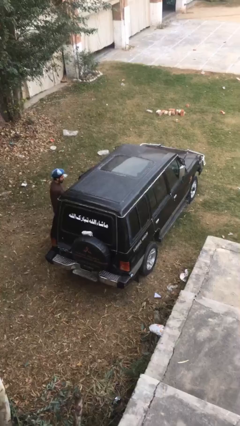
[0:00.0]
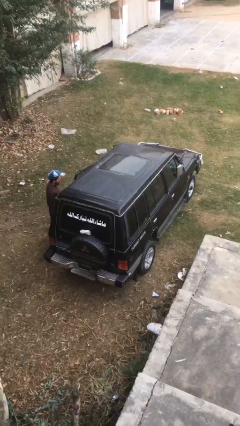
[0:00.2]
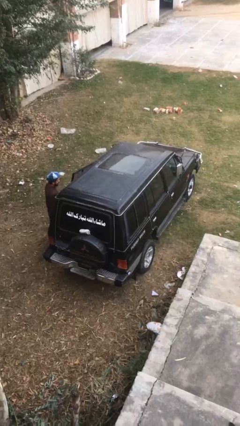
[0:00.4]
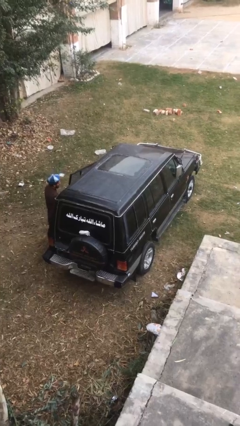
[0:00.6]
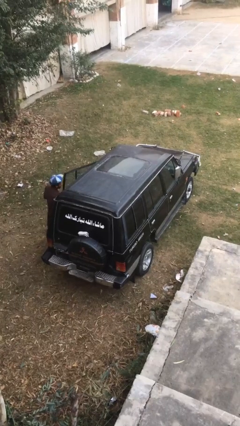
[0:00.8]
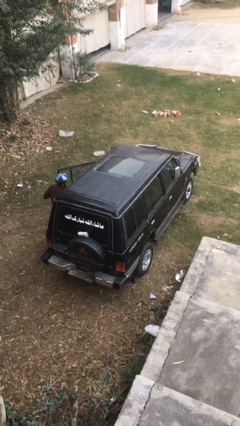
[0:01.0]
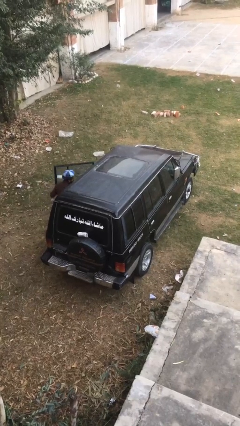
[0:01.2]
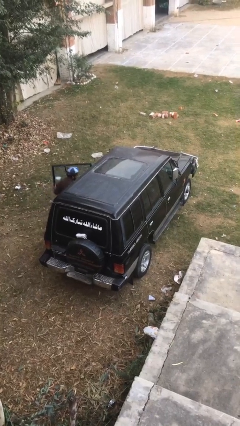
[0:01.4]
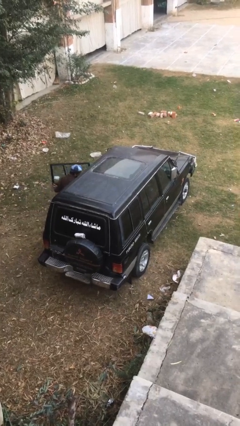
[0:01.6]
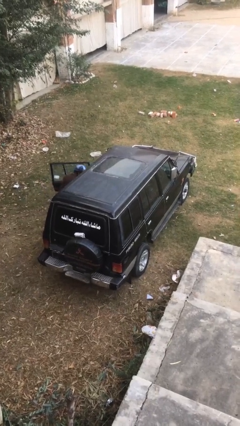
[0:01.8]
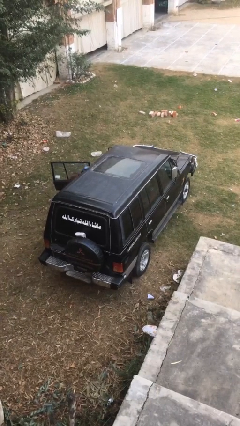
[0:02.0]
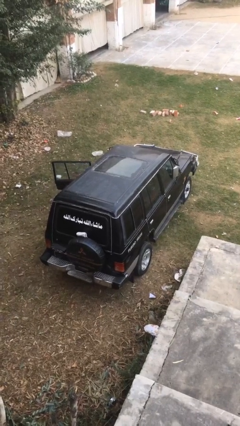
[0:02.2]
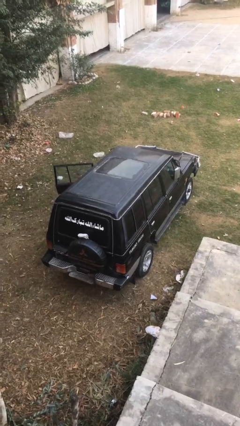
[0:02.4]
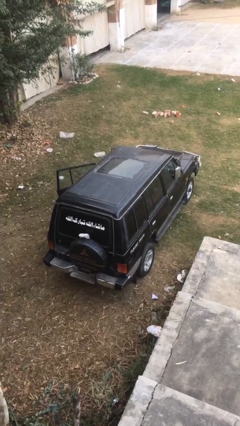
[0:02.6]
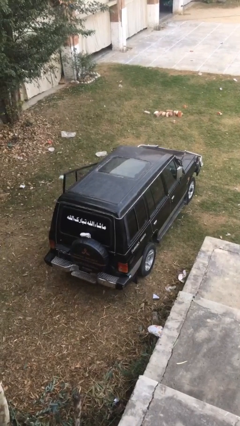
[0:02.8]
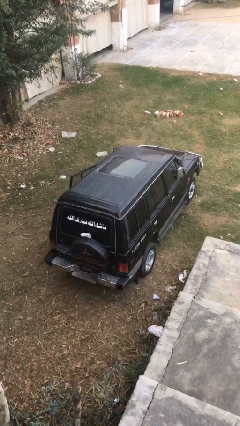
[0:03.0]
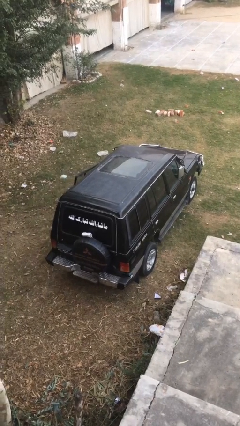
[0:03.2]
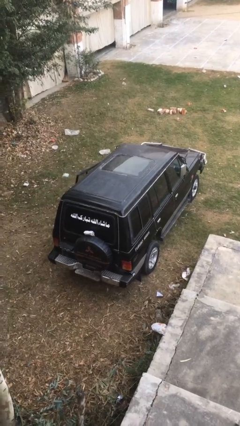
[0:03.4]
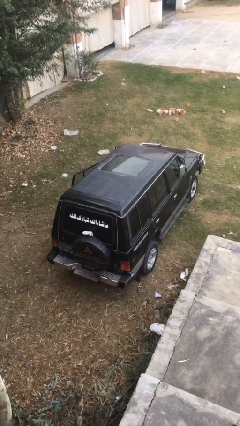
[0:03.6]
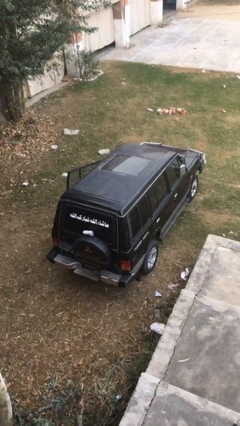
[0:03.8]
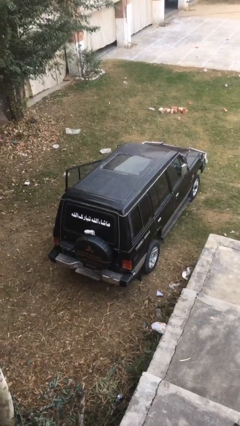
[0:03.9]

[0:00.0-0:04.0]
car picks up person

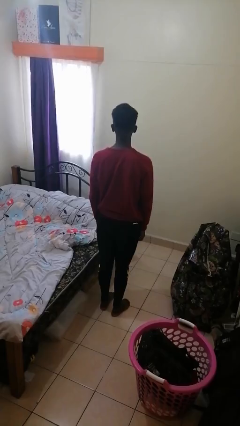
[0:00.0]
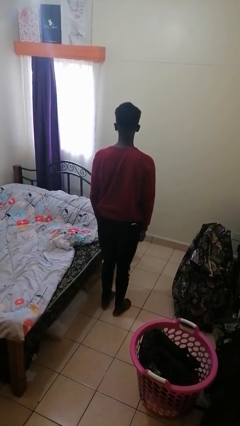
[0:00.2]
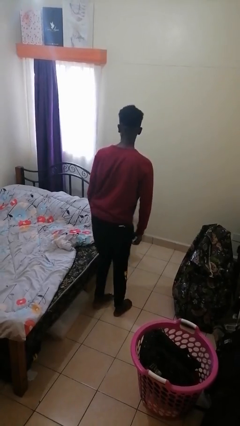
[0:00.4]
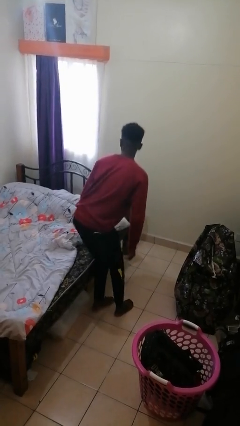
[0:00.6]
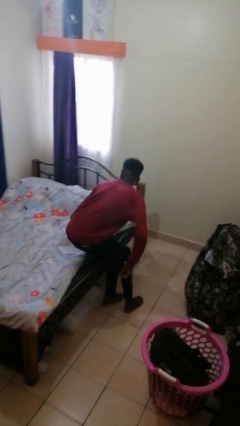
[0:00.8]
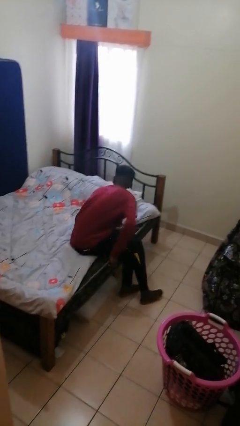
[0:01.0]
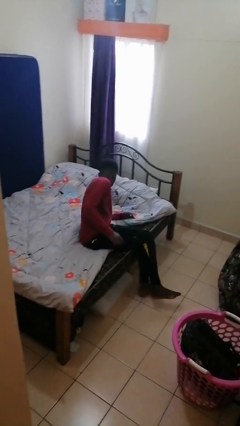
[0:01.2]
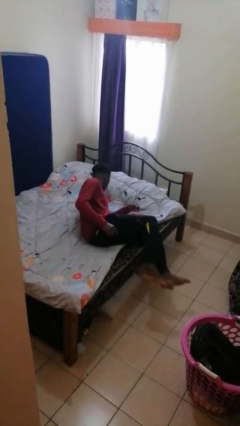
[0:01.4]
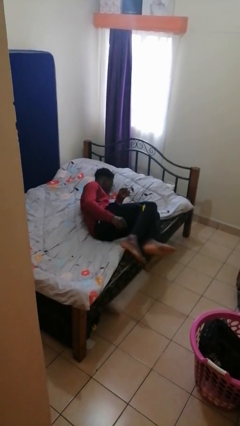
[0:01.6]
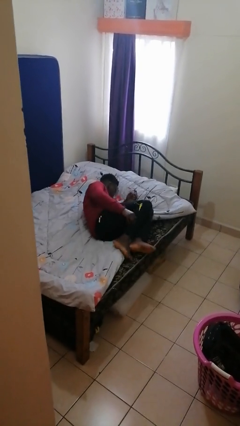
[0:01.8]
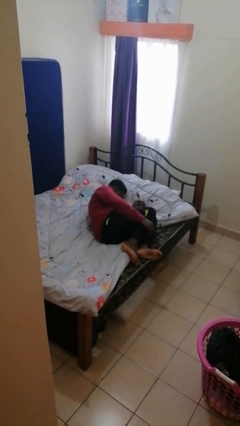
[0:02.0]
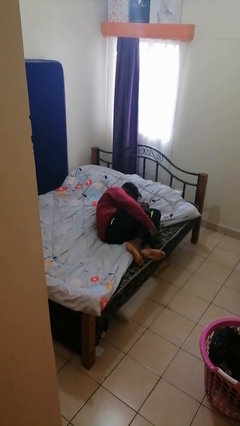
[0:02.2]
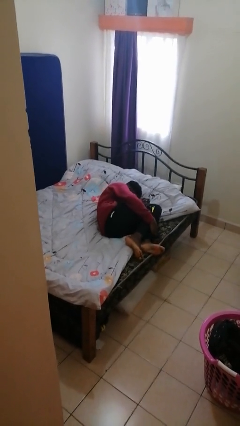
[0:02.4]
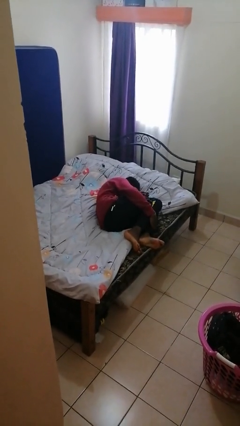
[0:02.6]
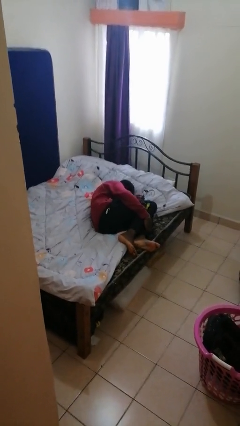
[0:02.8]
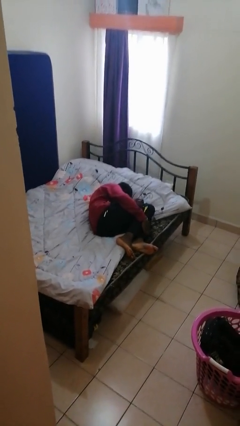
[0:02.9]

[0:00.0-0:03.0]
person lies down on bed

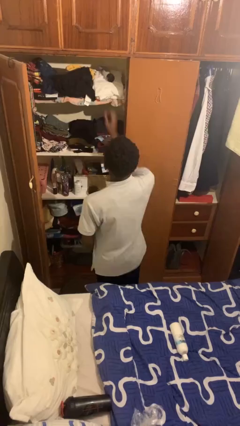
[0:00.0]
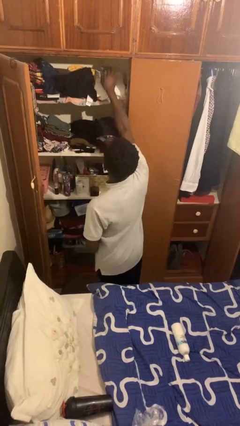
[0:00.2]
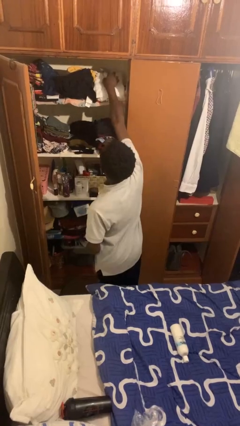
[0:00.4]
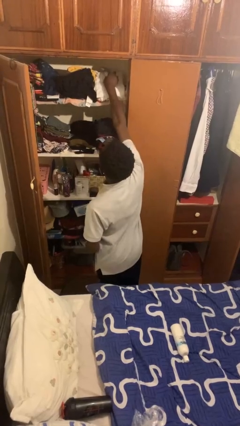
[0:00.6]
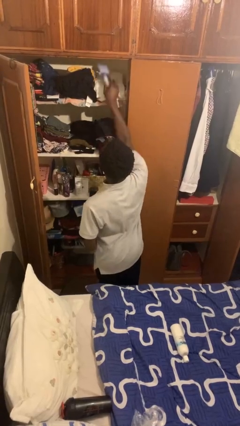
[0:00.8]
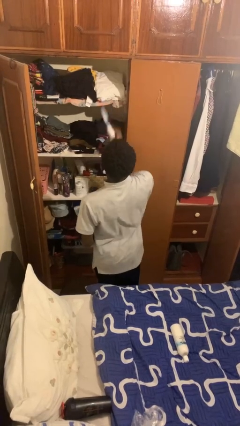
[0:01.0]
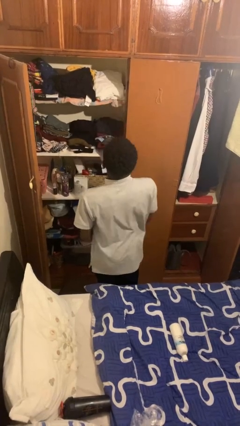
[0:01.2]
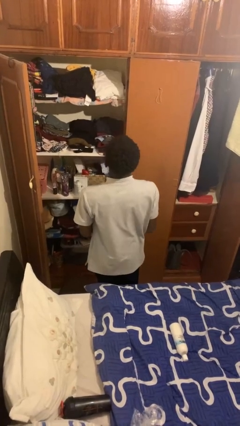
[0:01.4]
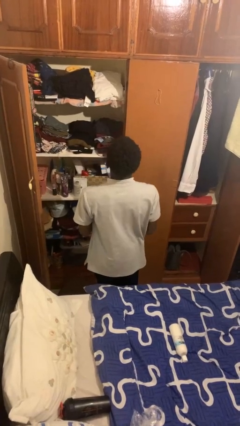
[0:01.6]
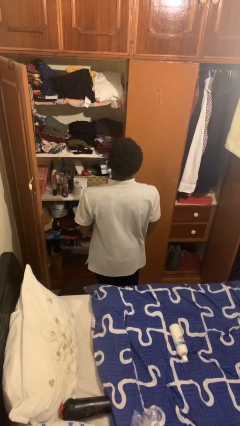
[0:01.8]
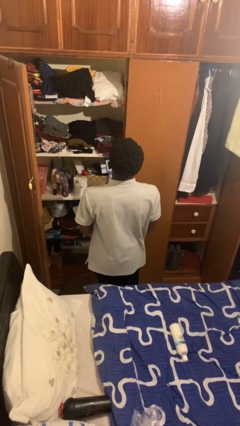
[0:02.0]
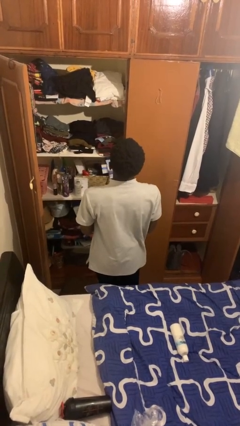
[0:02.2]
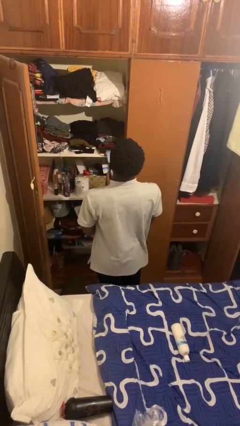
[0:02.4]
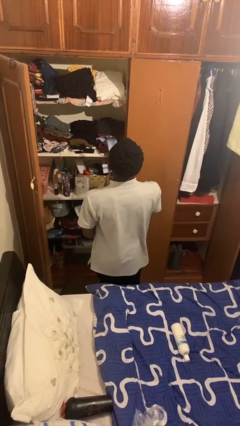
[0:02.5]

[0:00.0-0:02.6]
person picks up object from shelf

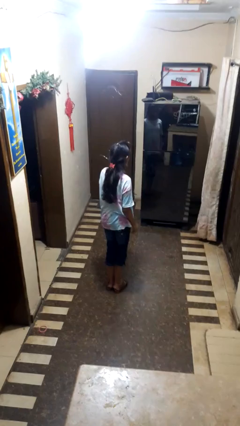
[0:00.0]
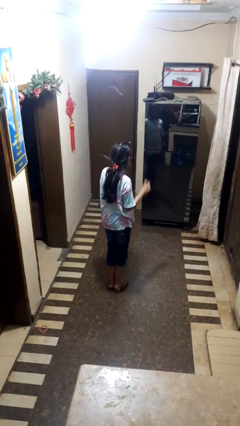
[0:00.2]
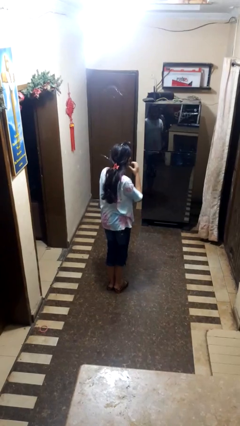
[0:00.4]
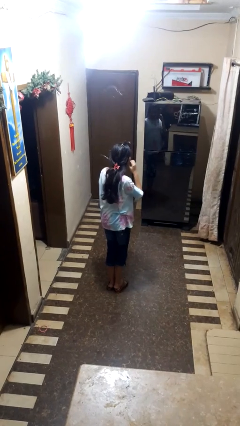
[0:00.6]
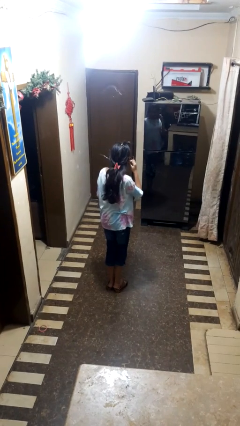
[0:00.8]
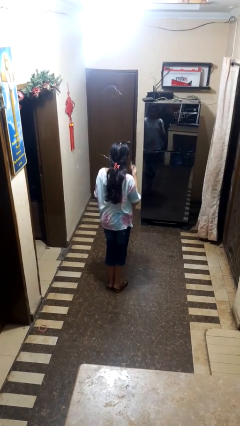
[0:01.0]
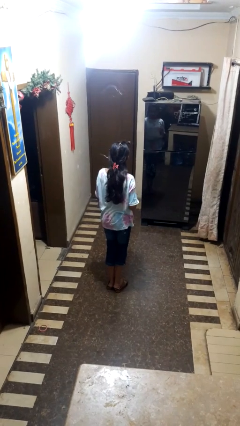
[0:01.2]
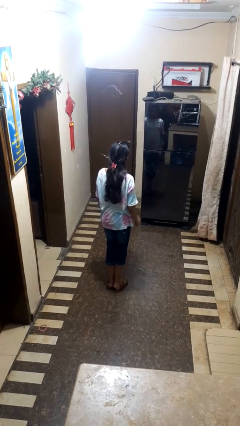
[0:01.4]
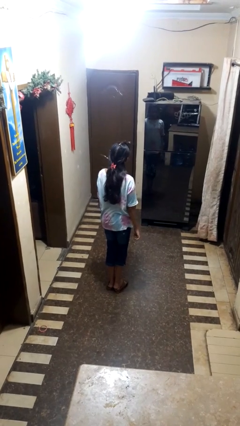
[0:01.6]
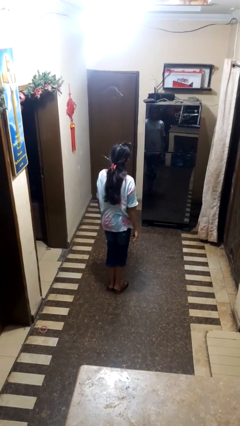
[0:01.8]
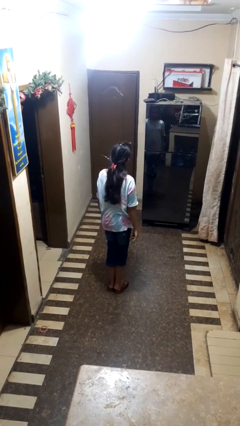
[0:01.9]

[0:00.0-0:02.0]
person takes off earrings

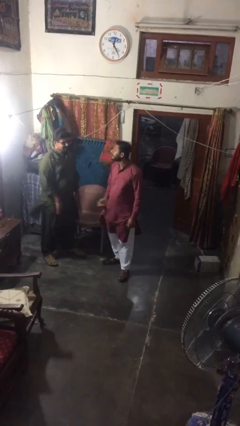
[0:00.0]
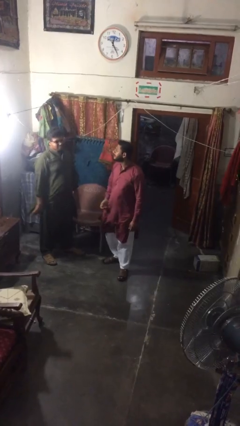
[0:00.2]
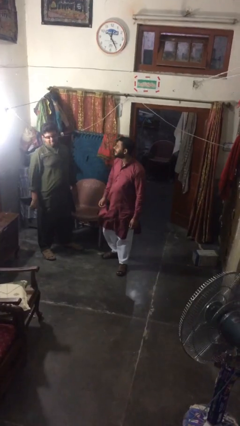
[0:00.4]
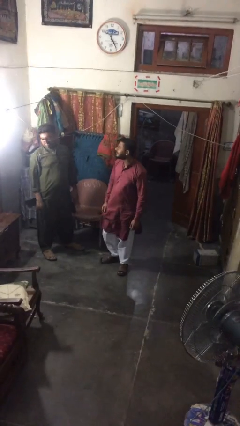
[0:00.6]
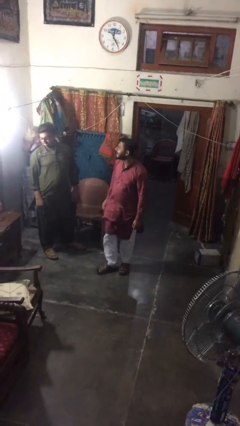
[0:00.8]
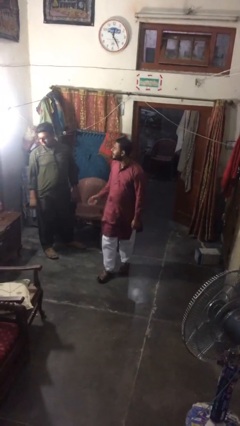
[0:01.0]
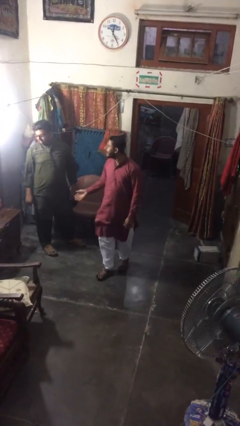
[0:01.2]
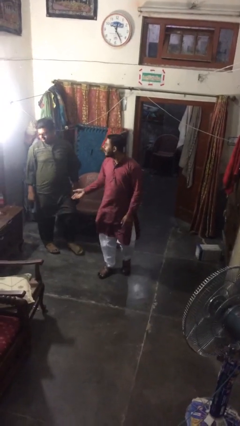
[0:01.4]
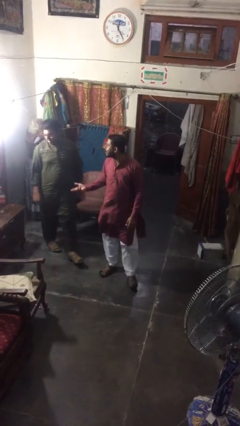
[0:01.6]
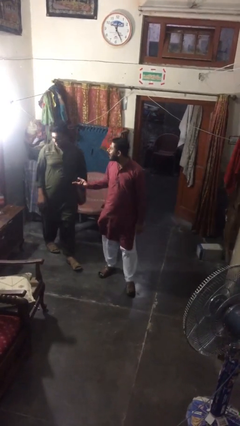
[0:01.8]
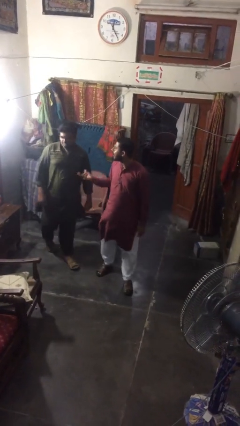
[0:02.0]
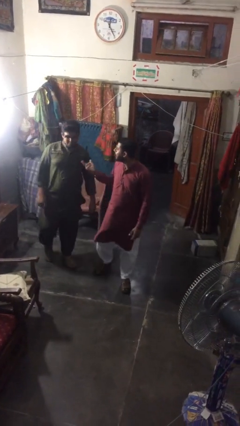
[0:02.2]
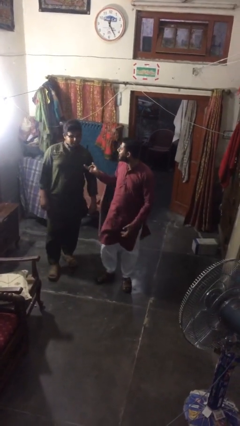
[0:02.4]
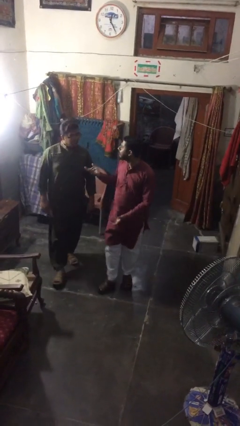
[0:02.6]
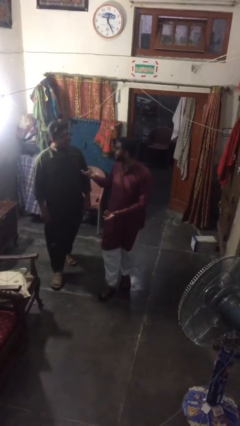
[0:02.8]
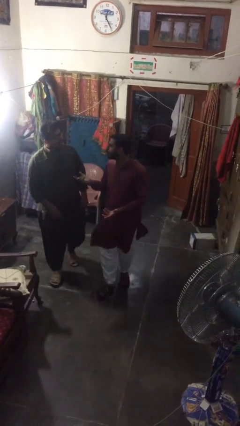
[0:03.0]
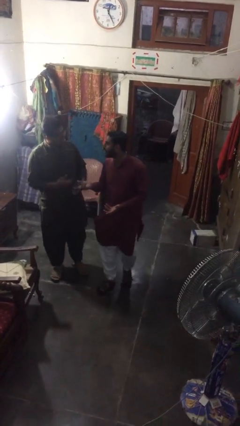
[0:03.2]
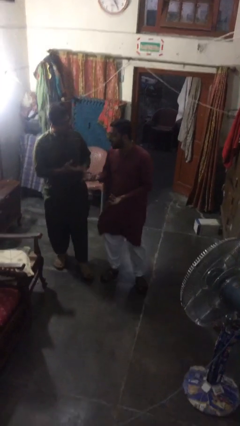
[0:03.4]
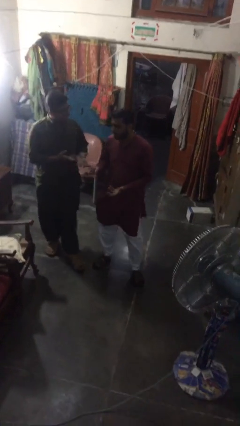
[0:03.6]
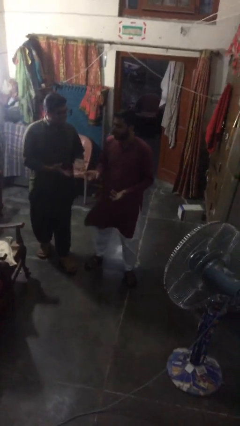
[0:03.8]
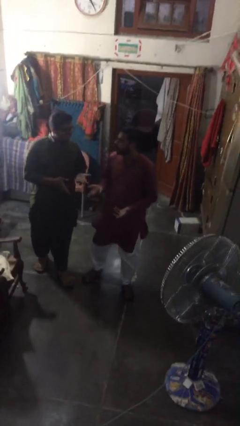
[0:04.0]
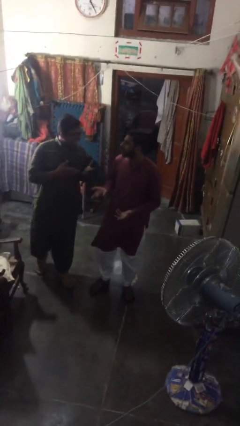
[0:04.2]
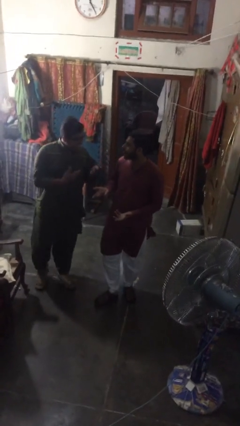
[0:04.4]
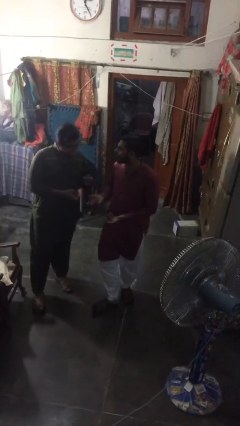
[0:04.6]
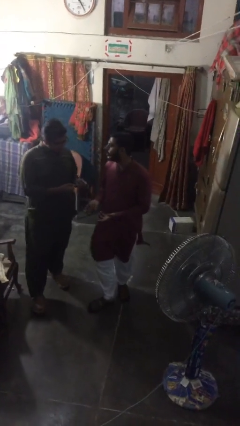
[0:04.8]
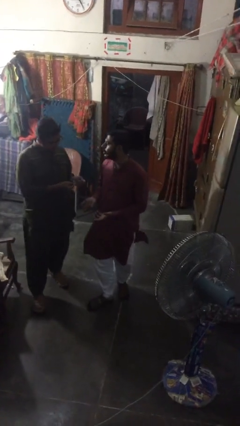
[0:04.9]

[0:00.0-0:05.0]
person talks to person

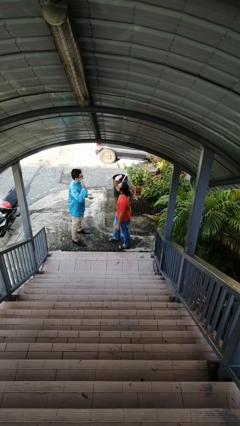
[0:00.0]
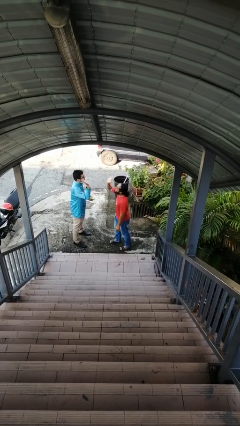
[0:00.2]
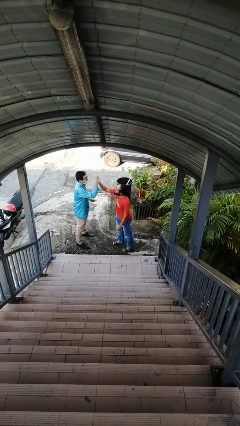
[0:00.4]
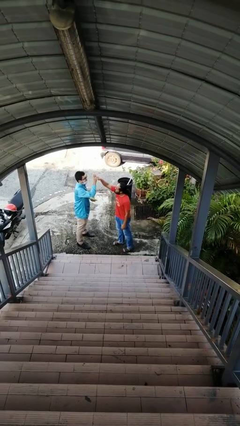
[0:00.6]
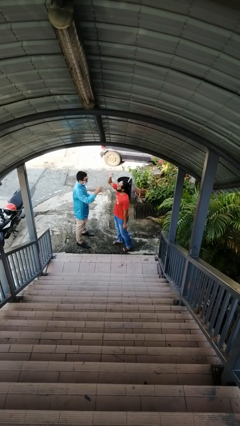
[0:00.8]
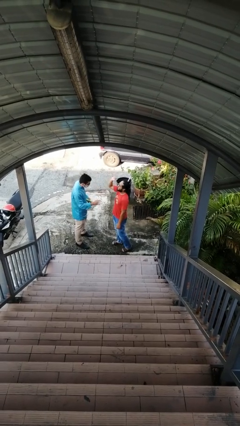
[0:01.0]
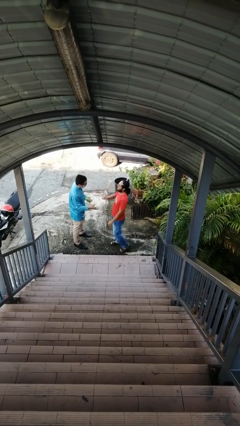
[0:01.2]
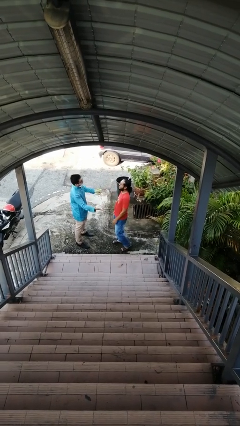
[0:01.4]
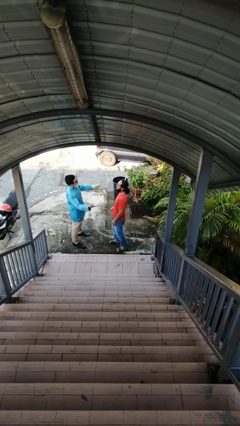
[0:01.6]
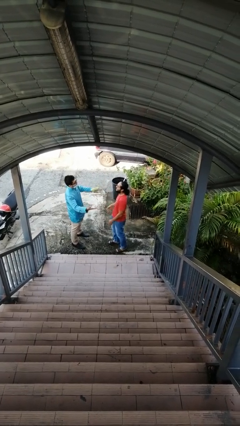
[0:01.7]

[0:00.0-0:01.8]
person highfives hand
